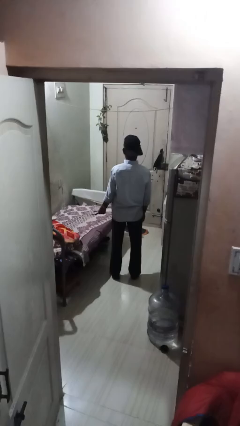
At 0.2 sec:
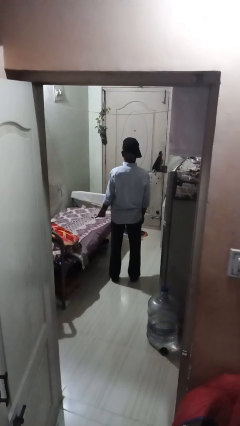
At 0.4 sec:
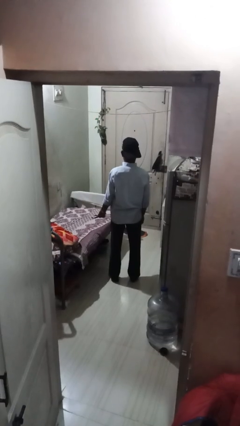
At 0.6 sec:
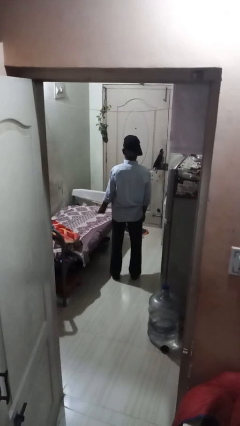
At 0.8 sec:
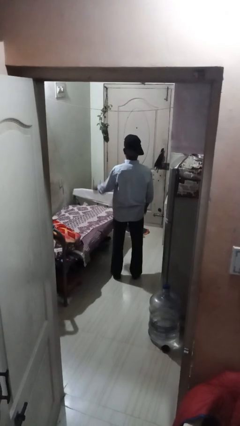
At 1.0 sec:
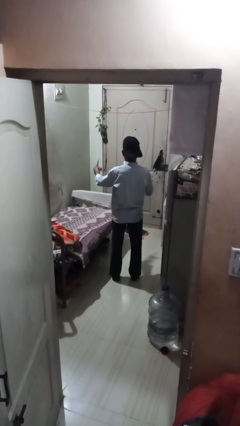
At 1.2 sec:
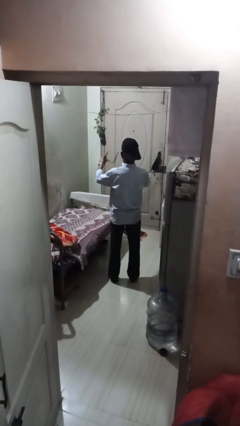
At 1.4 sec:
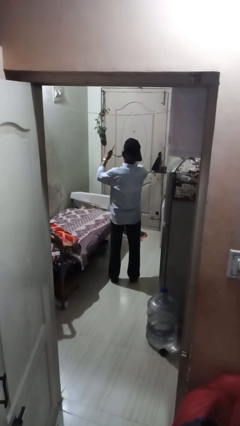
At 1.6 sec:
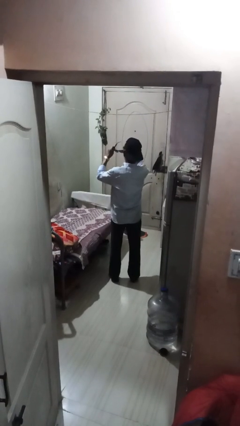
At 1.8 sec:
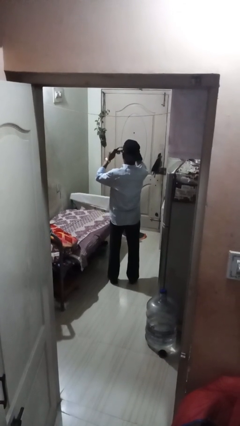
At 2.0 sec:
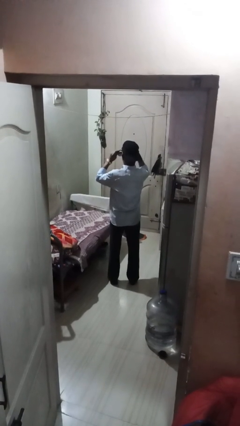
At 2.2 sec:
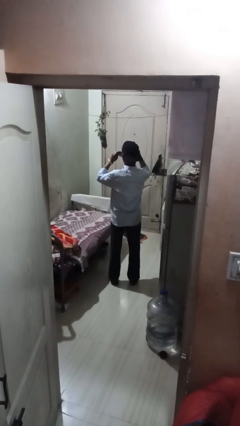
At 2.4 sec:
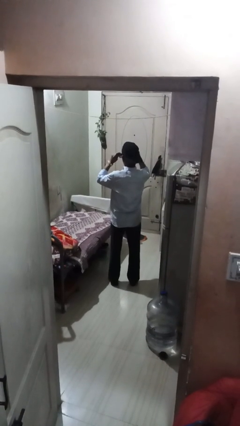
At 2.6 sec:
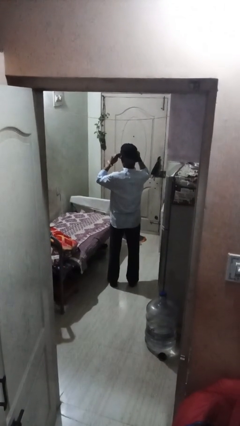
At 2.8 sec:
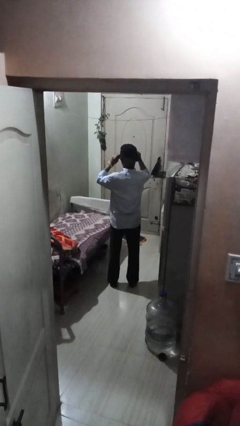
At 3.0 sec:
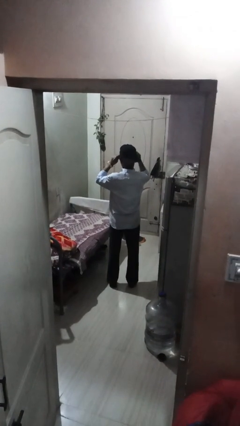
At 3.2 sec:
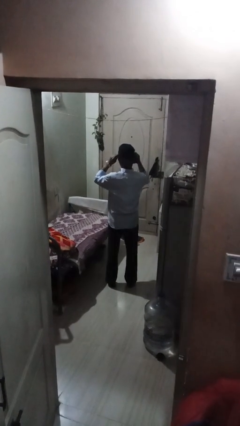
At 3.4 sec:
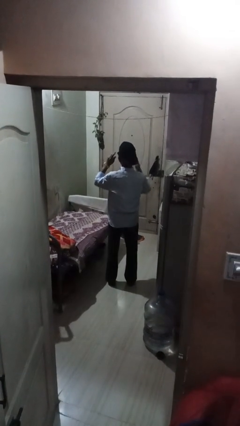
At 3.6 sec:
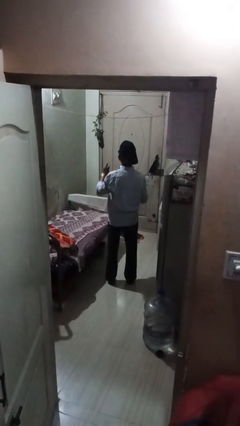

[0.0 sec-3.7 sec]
person puts on sunglasses

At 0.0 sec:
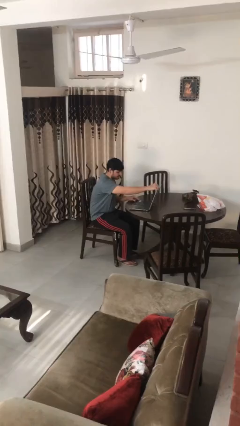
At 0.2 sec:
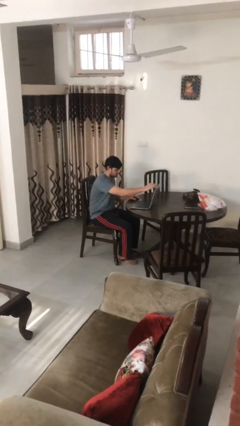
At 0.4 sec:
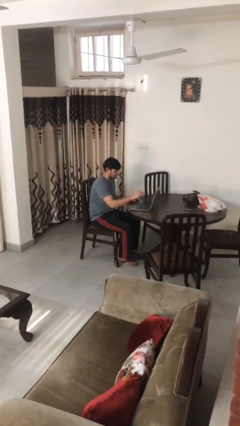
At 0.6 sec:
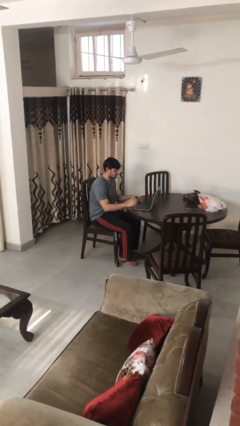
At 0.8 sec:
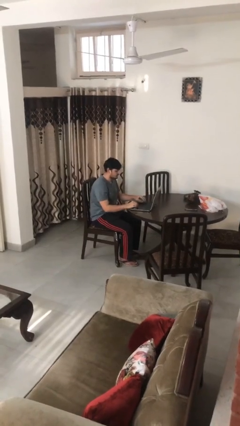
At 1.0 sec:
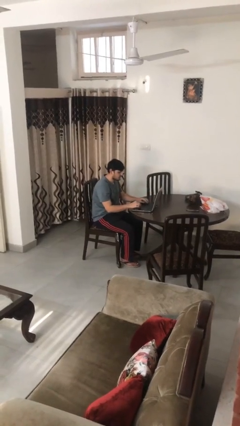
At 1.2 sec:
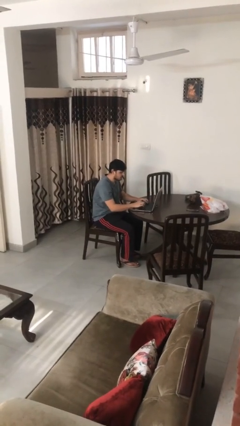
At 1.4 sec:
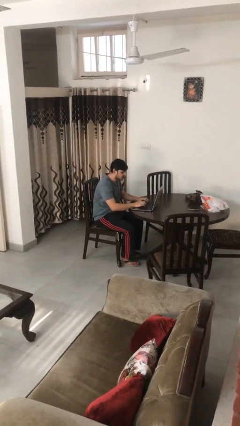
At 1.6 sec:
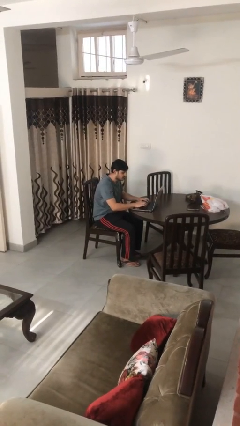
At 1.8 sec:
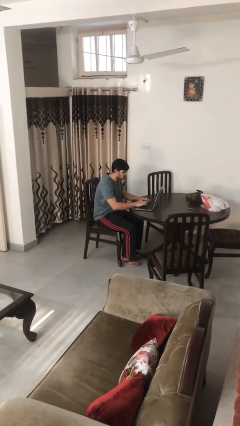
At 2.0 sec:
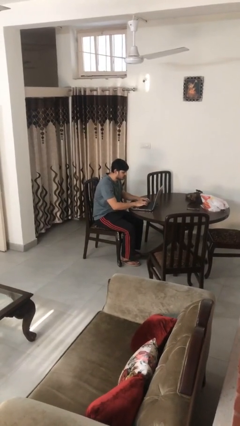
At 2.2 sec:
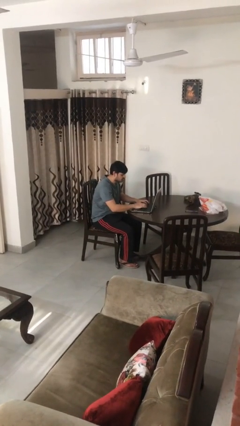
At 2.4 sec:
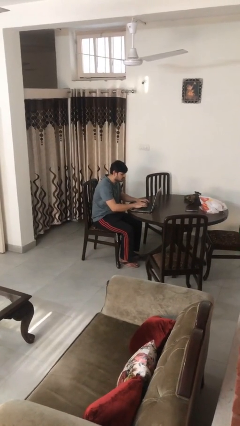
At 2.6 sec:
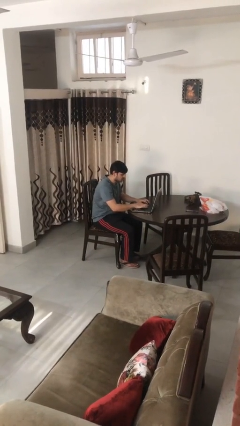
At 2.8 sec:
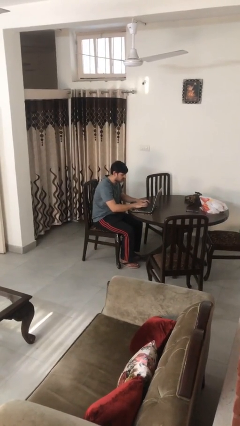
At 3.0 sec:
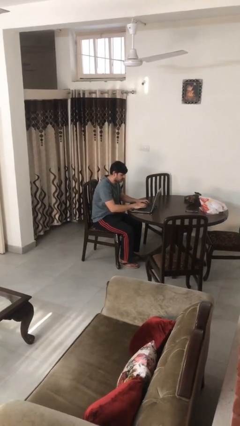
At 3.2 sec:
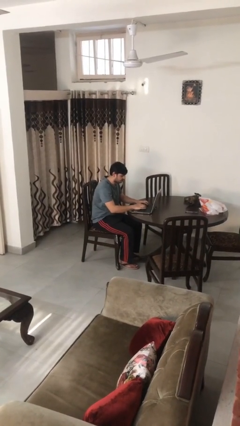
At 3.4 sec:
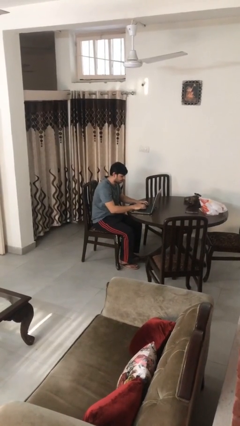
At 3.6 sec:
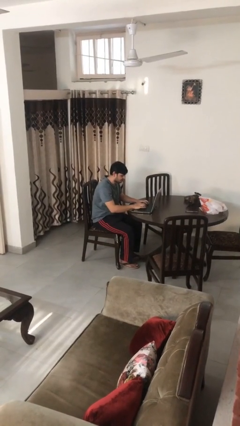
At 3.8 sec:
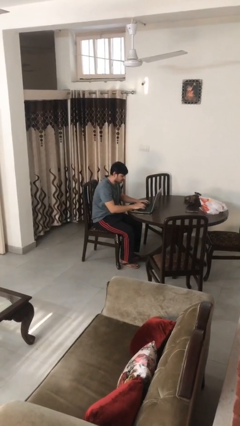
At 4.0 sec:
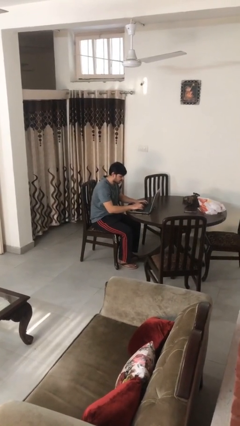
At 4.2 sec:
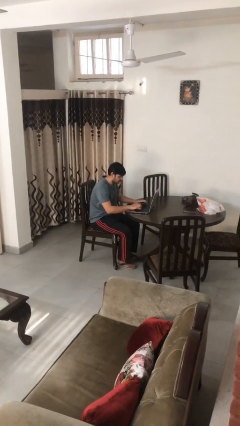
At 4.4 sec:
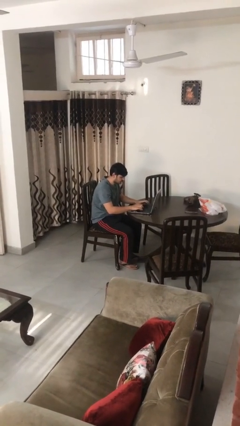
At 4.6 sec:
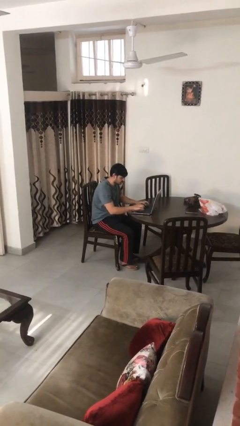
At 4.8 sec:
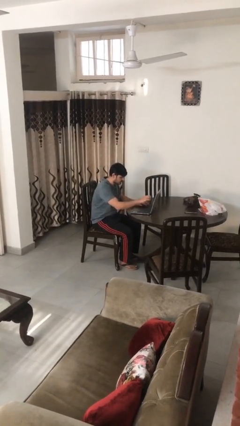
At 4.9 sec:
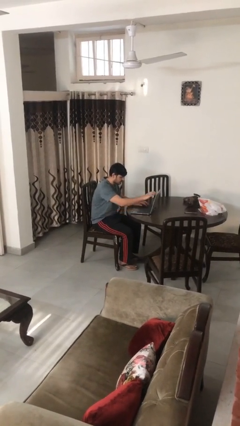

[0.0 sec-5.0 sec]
person interacts with laptop

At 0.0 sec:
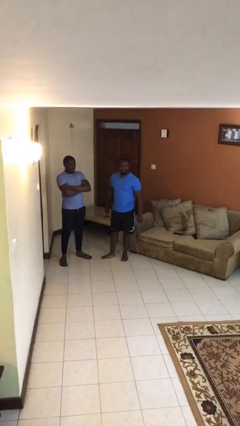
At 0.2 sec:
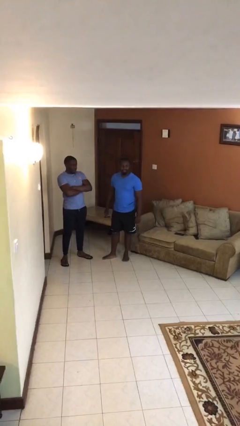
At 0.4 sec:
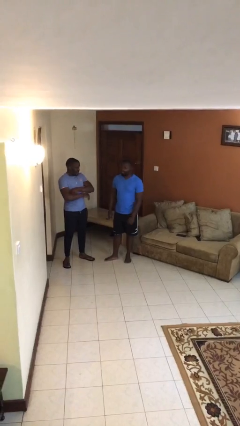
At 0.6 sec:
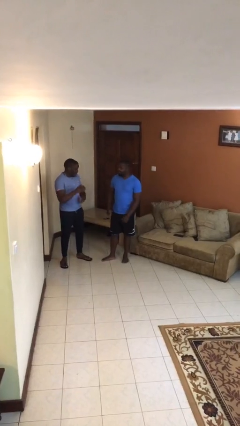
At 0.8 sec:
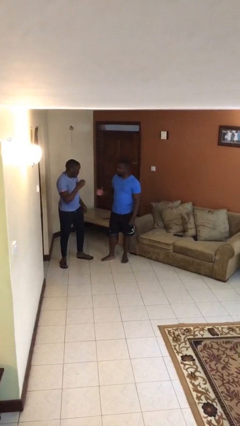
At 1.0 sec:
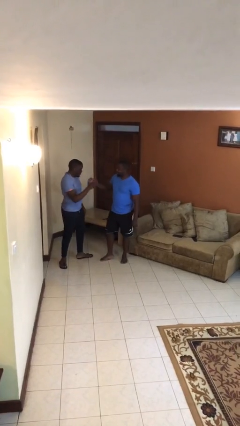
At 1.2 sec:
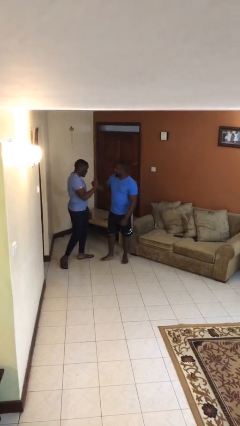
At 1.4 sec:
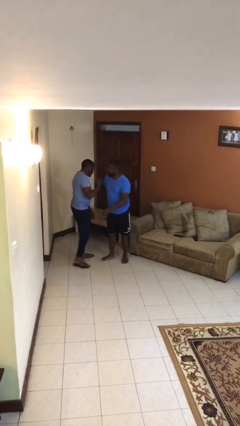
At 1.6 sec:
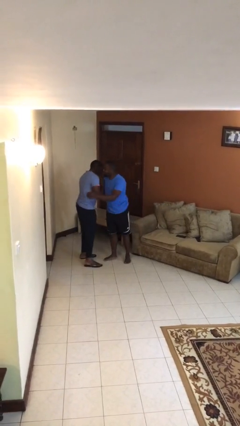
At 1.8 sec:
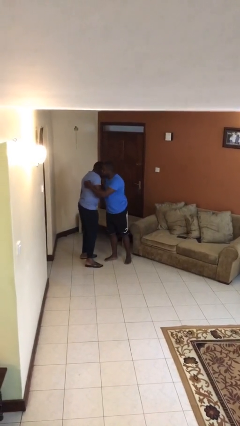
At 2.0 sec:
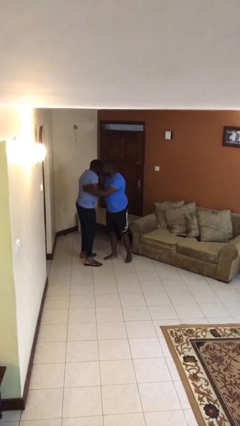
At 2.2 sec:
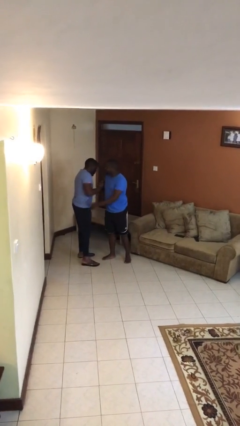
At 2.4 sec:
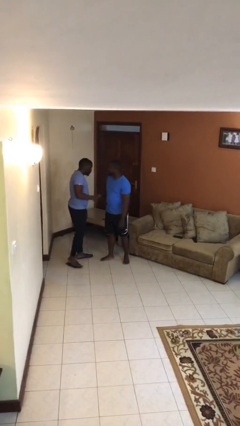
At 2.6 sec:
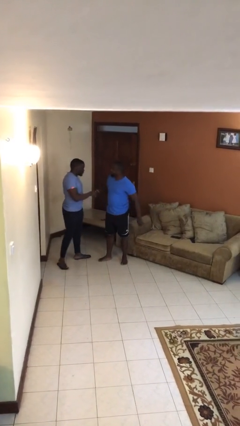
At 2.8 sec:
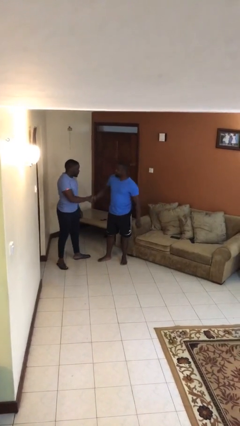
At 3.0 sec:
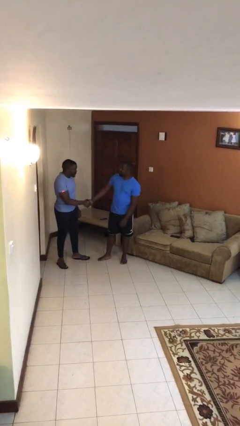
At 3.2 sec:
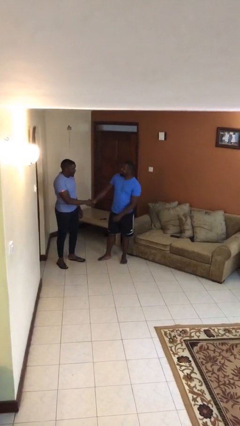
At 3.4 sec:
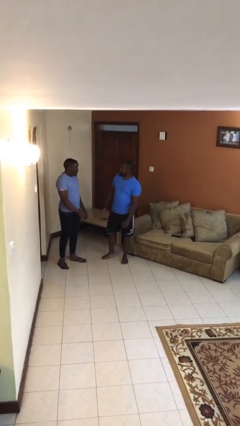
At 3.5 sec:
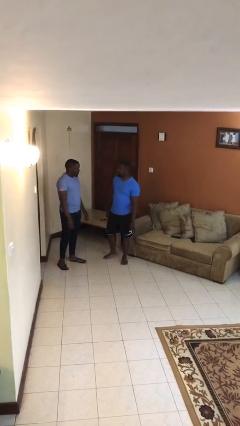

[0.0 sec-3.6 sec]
person embraces person

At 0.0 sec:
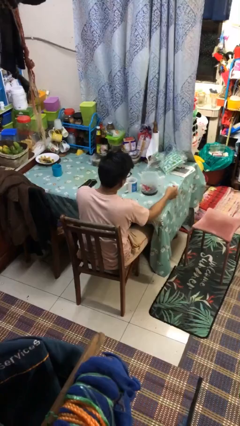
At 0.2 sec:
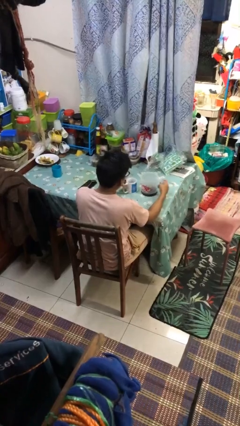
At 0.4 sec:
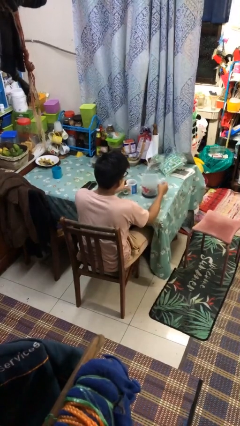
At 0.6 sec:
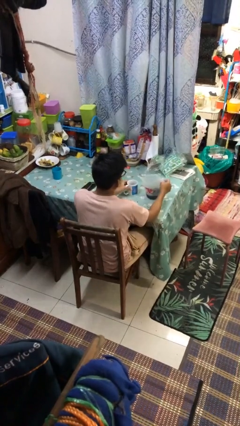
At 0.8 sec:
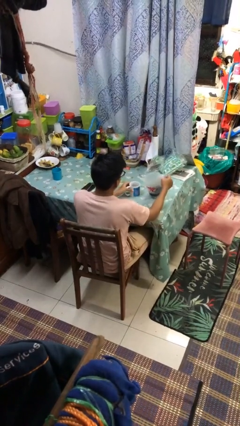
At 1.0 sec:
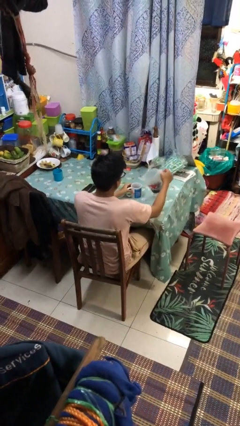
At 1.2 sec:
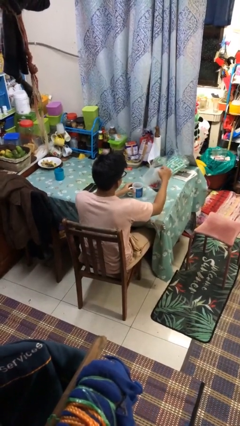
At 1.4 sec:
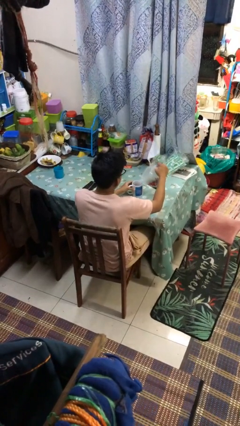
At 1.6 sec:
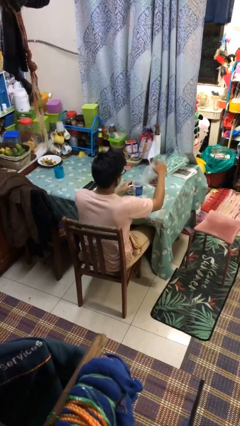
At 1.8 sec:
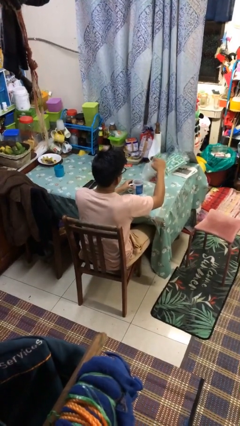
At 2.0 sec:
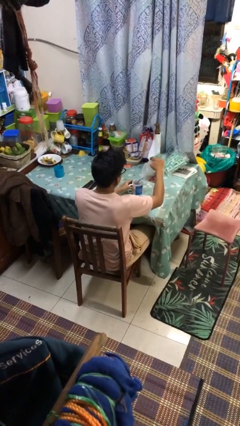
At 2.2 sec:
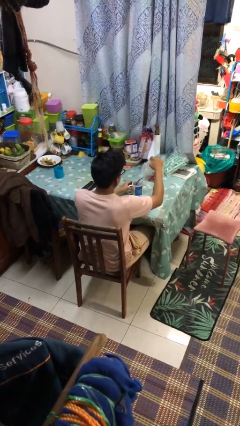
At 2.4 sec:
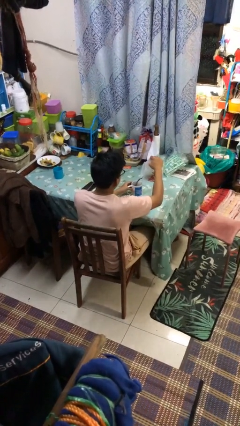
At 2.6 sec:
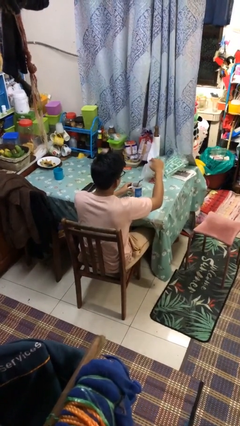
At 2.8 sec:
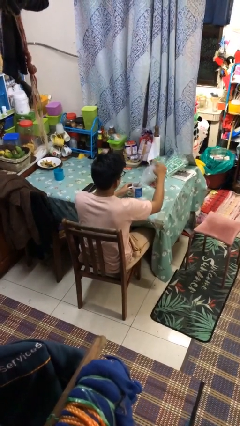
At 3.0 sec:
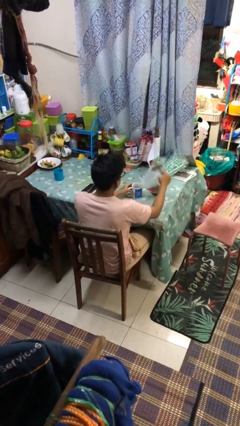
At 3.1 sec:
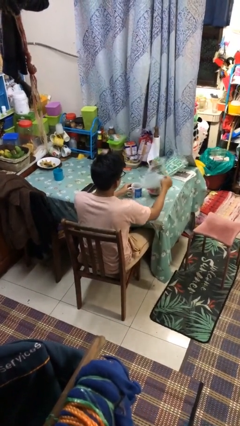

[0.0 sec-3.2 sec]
person pours coffee into mug

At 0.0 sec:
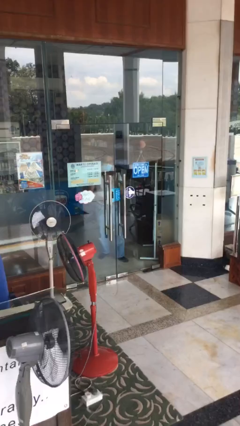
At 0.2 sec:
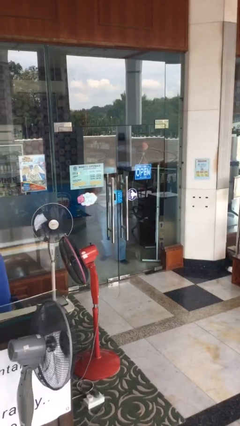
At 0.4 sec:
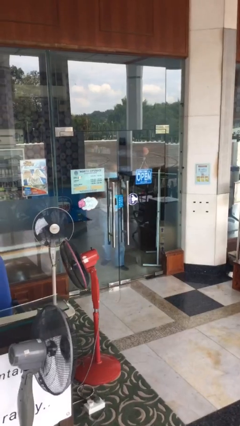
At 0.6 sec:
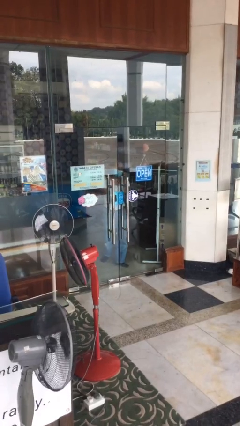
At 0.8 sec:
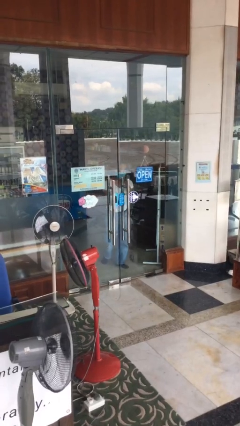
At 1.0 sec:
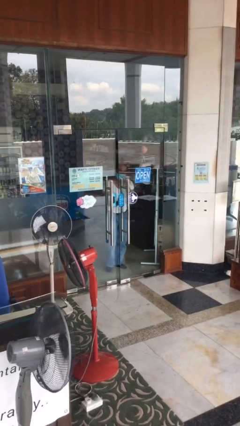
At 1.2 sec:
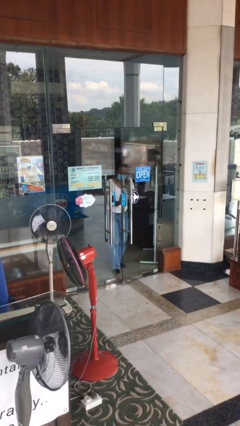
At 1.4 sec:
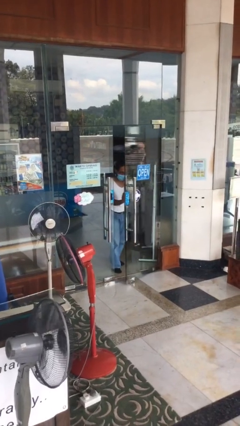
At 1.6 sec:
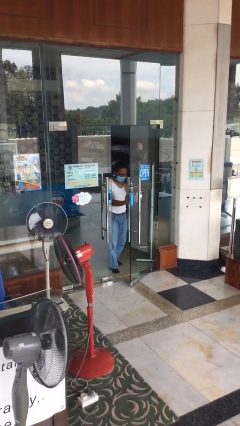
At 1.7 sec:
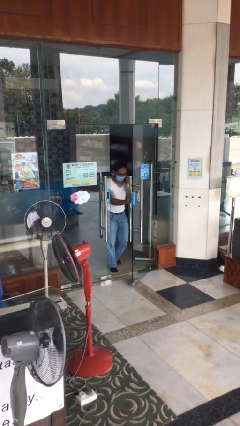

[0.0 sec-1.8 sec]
person opens facility door
